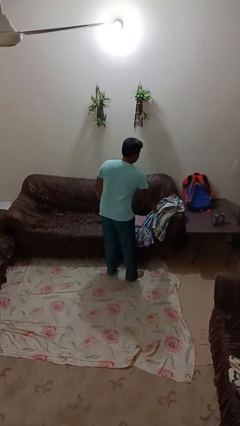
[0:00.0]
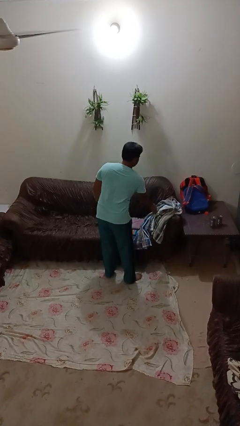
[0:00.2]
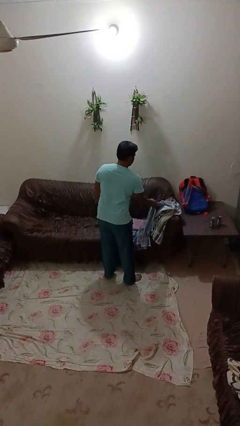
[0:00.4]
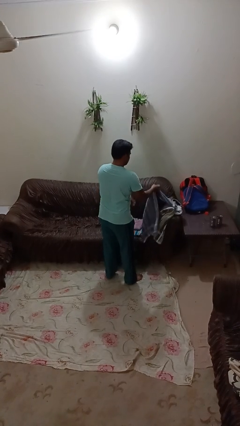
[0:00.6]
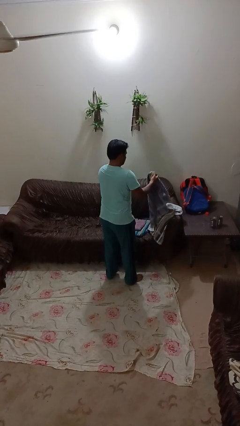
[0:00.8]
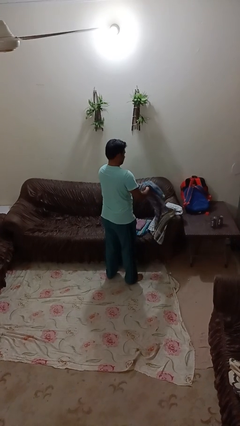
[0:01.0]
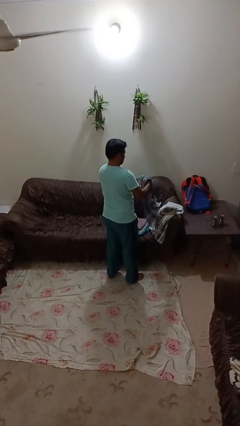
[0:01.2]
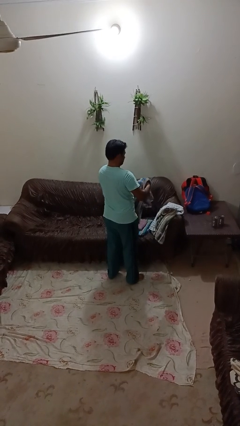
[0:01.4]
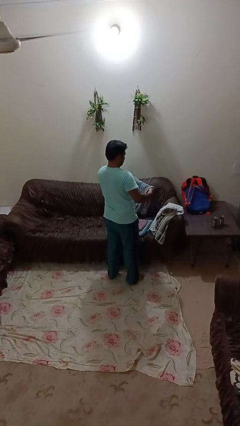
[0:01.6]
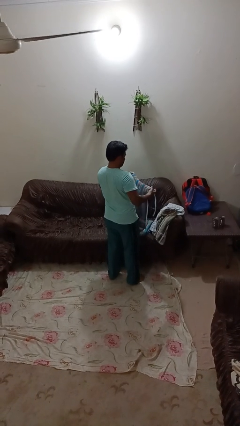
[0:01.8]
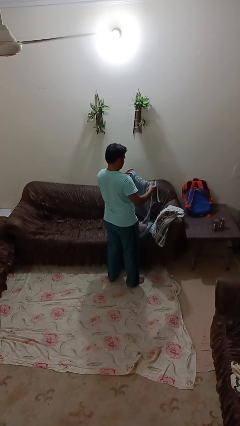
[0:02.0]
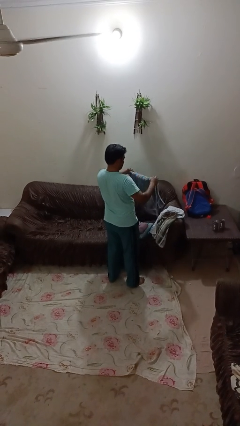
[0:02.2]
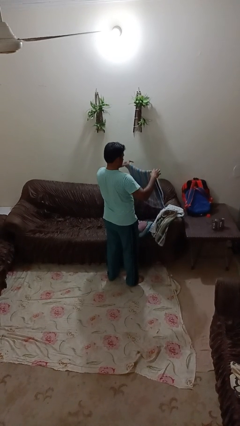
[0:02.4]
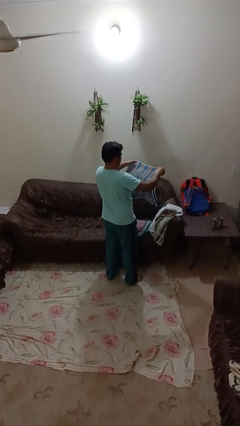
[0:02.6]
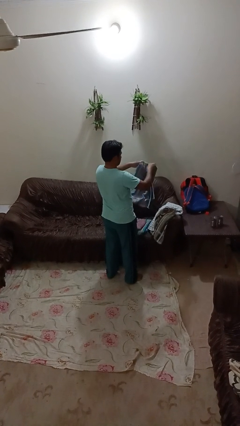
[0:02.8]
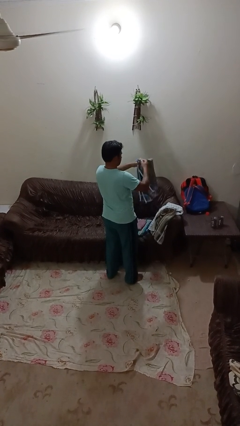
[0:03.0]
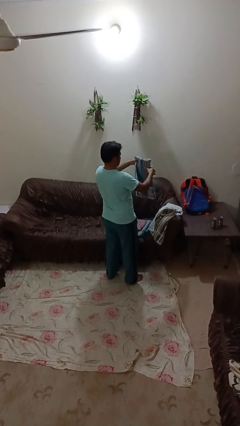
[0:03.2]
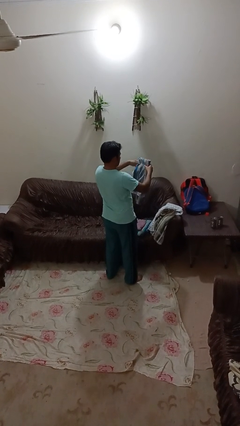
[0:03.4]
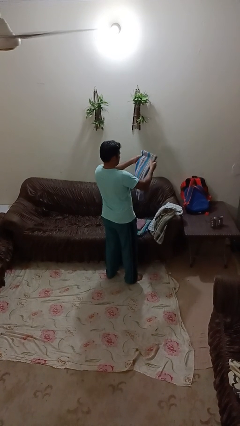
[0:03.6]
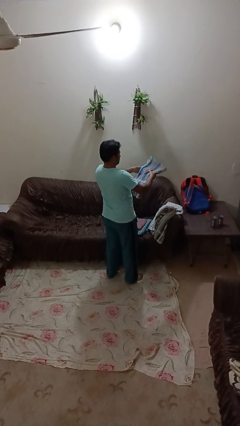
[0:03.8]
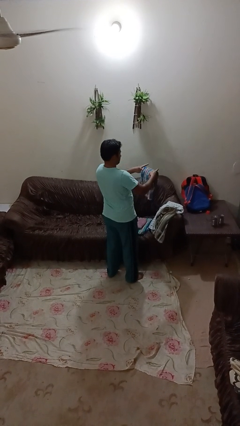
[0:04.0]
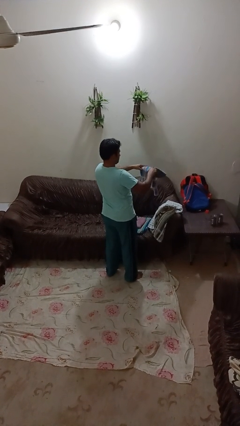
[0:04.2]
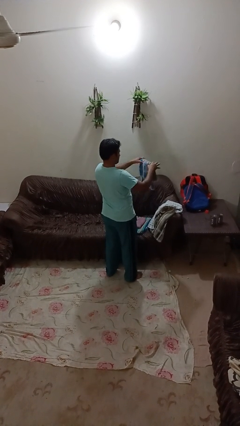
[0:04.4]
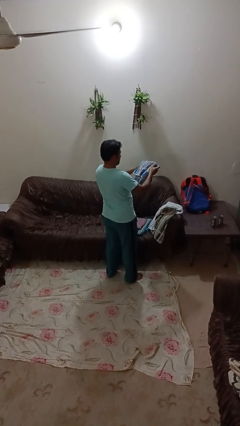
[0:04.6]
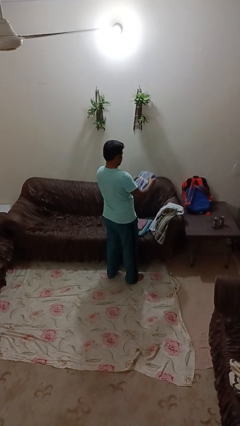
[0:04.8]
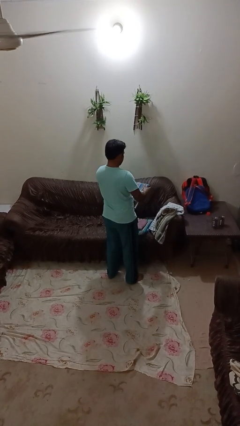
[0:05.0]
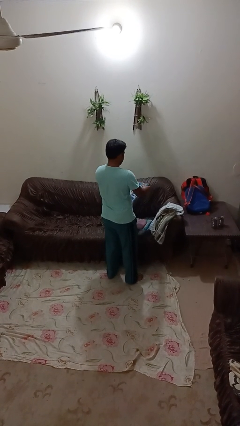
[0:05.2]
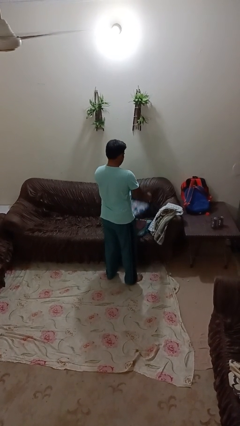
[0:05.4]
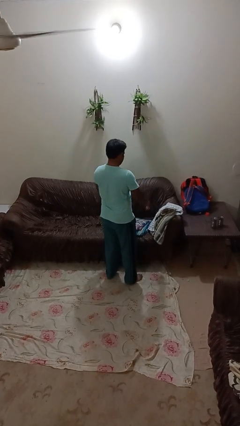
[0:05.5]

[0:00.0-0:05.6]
person folds towel

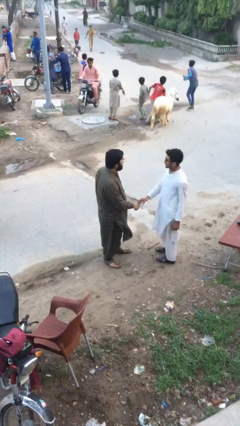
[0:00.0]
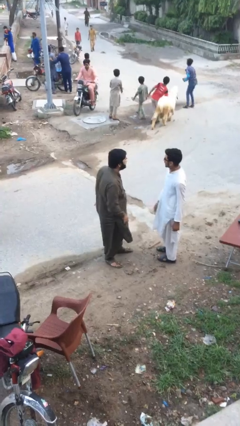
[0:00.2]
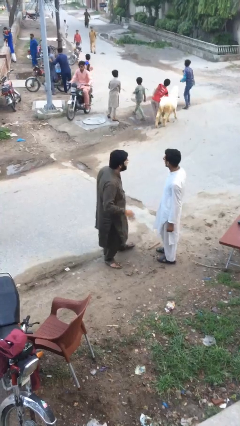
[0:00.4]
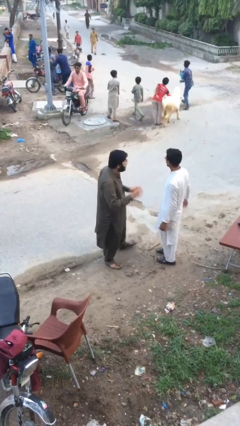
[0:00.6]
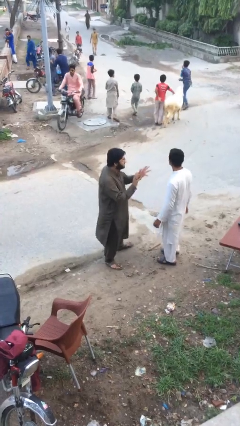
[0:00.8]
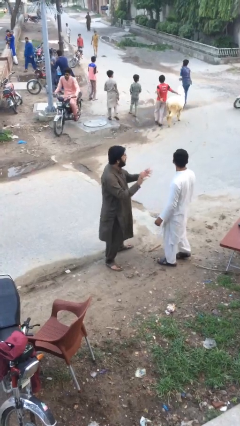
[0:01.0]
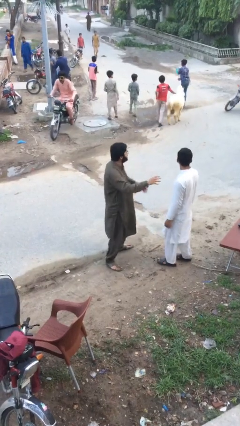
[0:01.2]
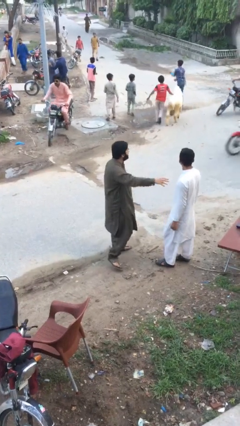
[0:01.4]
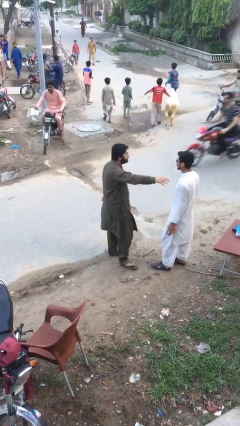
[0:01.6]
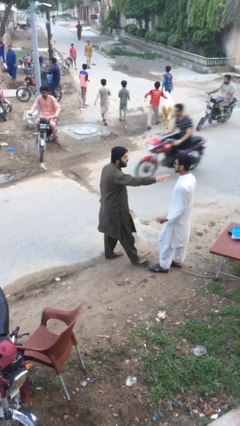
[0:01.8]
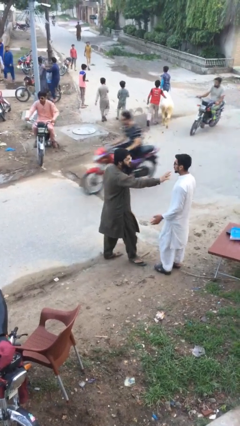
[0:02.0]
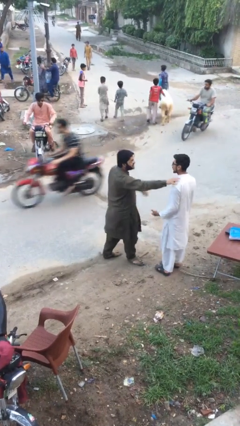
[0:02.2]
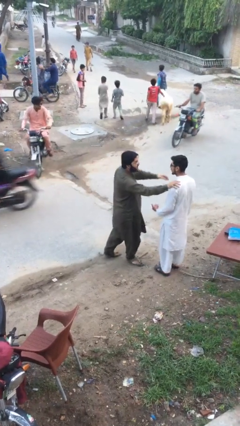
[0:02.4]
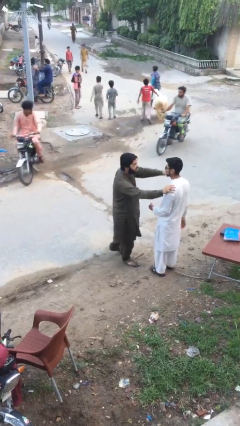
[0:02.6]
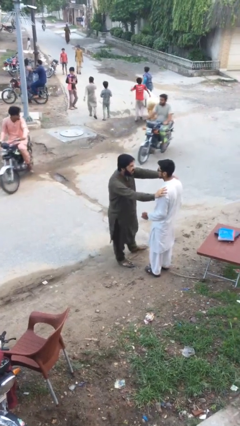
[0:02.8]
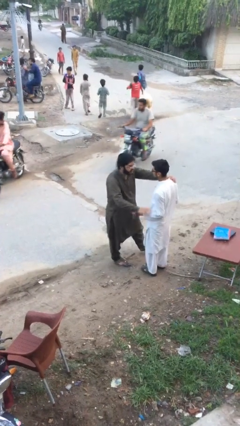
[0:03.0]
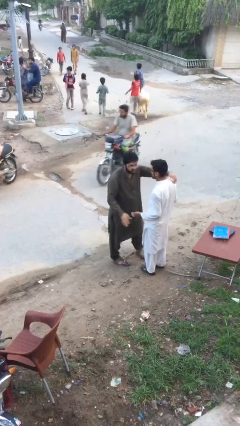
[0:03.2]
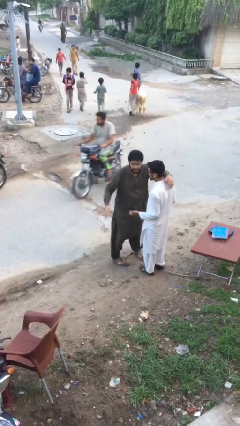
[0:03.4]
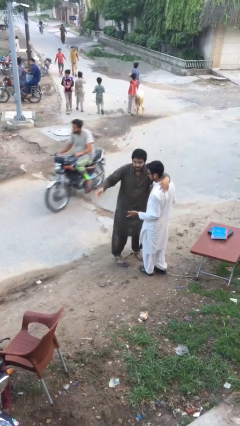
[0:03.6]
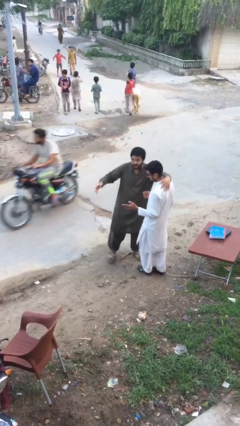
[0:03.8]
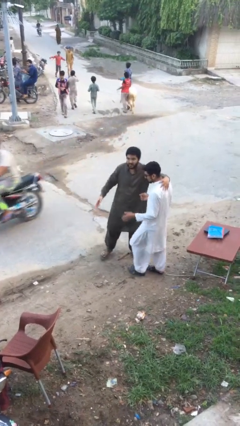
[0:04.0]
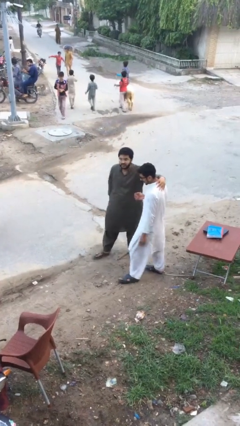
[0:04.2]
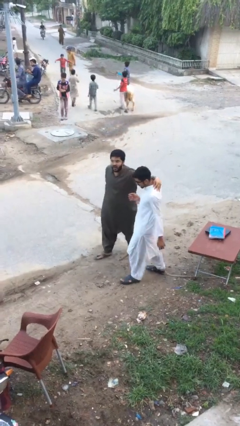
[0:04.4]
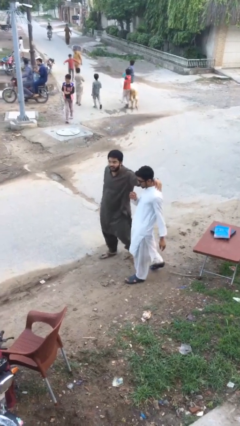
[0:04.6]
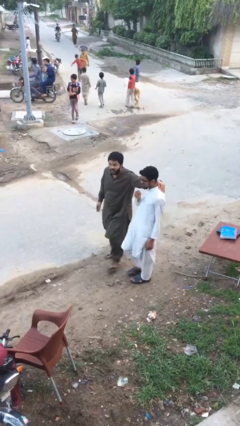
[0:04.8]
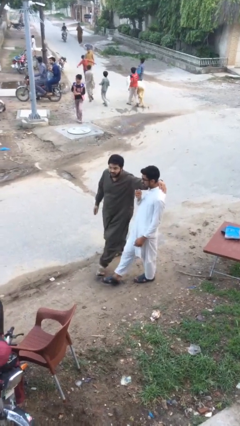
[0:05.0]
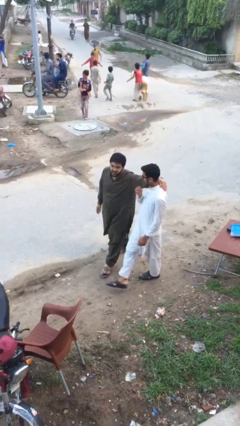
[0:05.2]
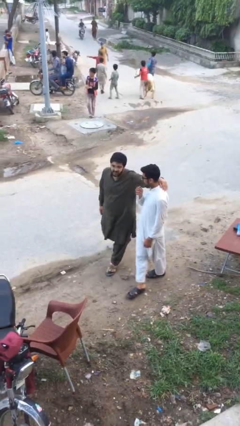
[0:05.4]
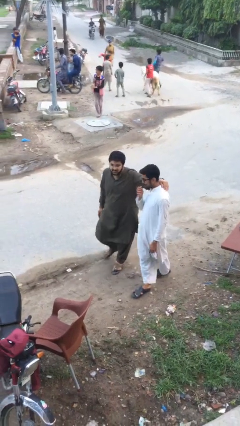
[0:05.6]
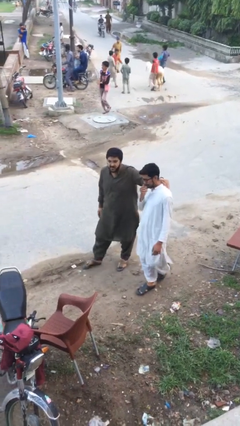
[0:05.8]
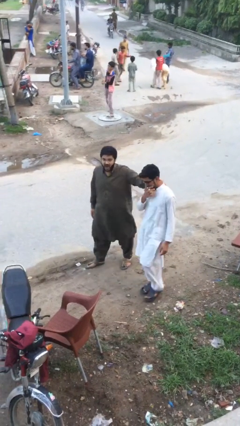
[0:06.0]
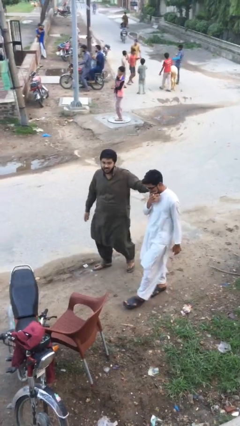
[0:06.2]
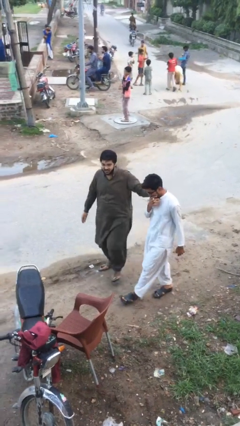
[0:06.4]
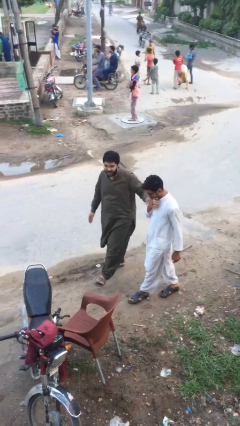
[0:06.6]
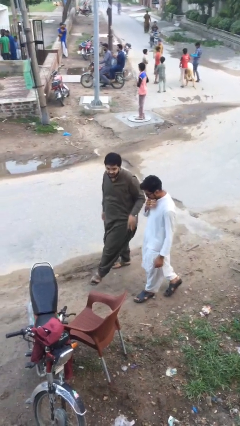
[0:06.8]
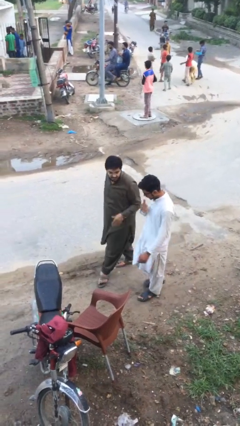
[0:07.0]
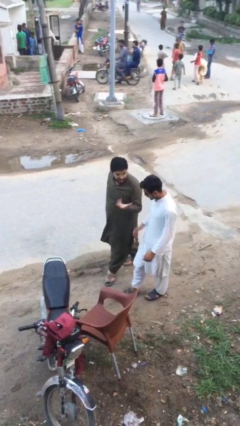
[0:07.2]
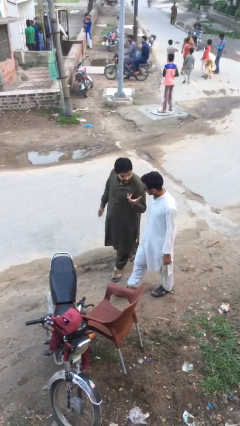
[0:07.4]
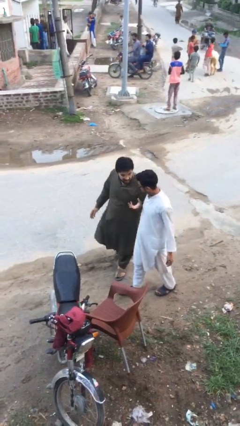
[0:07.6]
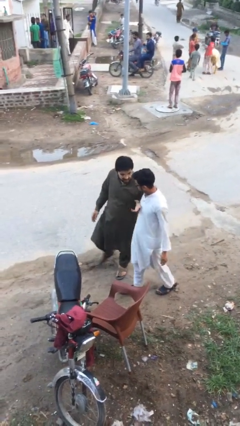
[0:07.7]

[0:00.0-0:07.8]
person talks to person

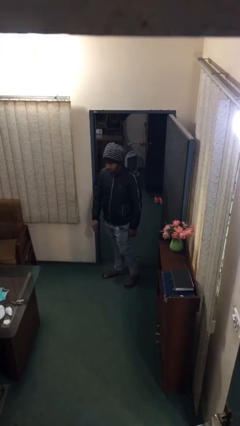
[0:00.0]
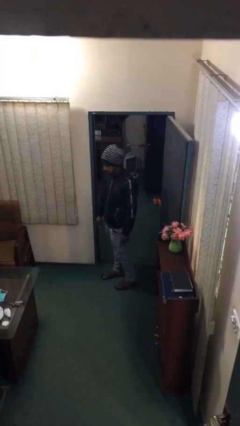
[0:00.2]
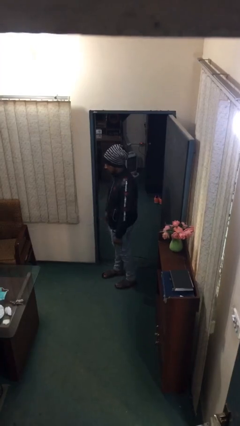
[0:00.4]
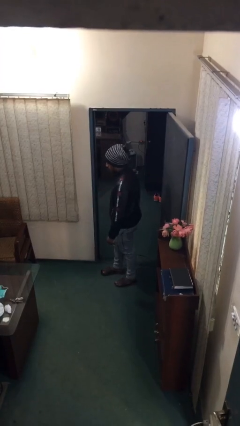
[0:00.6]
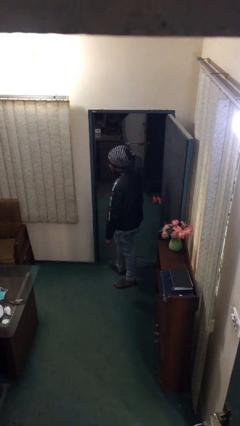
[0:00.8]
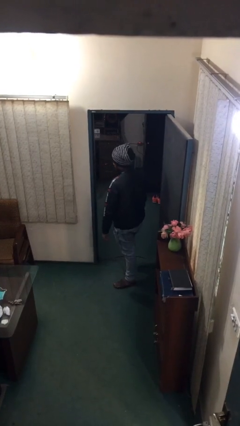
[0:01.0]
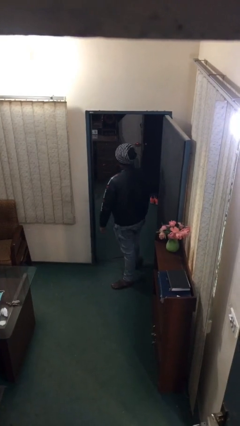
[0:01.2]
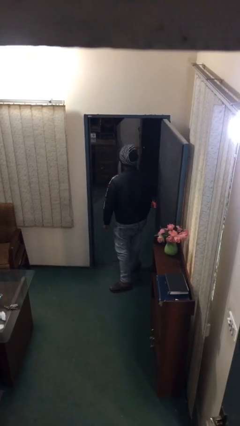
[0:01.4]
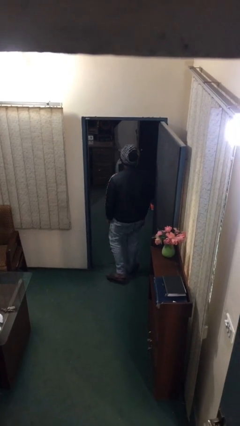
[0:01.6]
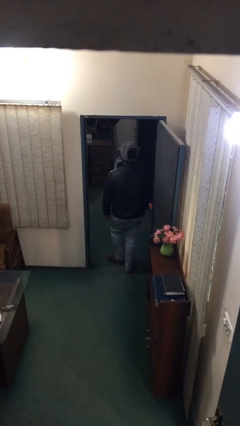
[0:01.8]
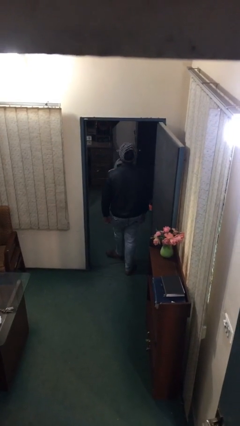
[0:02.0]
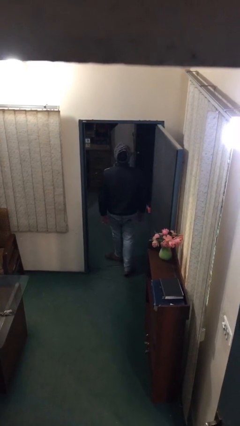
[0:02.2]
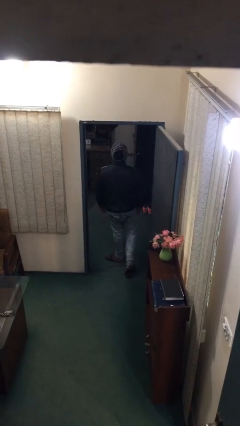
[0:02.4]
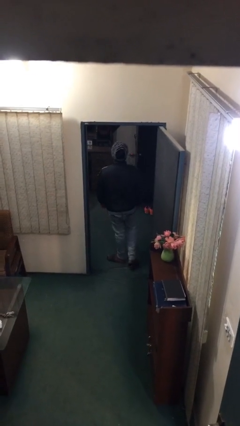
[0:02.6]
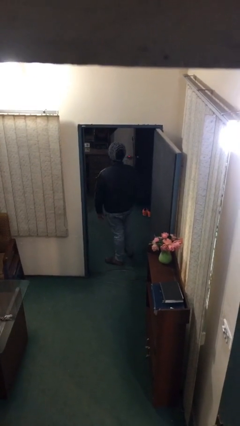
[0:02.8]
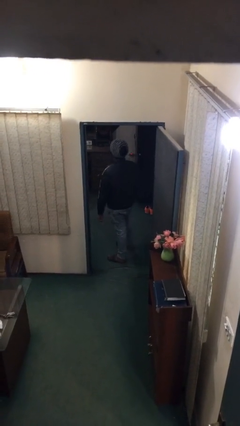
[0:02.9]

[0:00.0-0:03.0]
person exits scene through structure

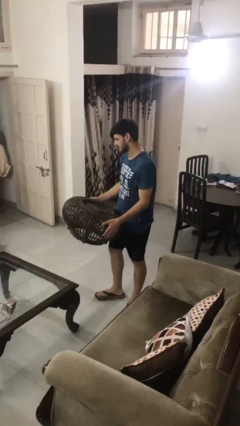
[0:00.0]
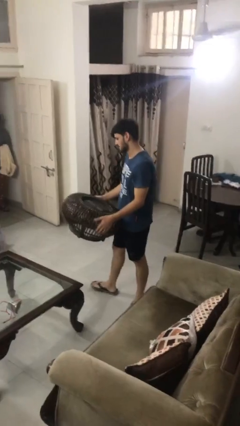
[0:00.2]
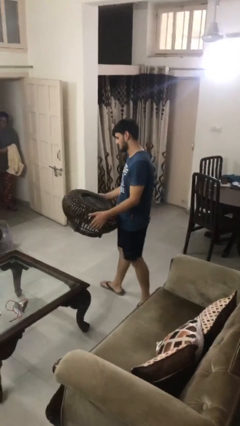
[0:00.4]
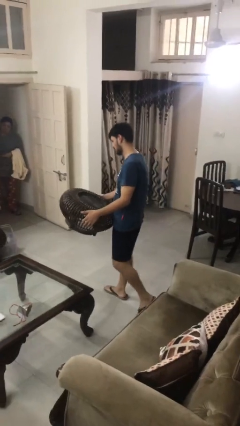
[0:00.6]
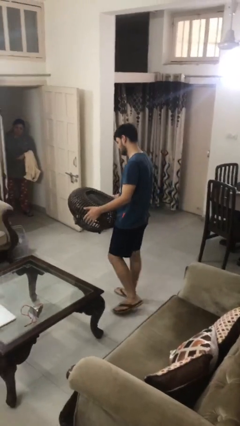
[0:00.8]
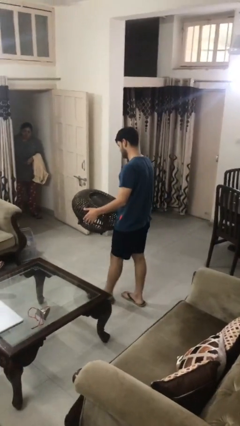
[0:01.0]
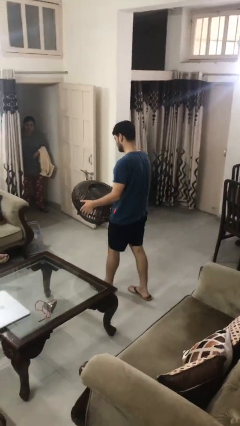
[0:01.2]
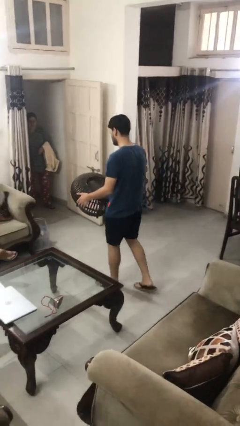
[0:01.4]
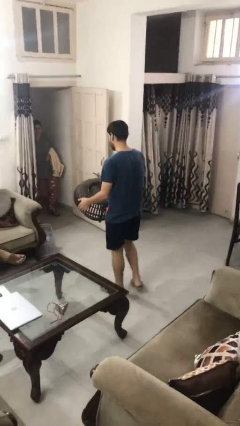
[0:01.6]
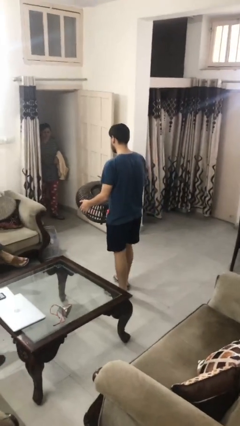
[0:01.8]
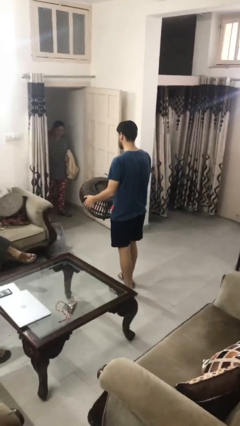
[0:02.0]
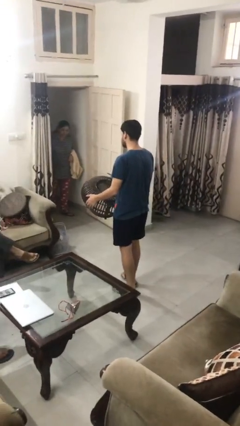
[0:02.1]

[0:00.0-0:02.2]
person carries furniture
